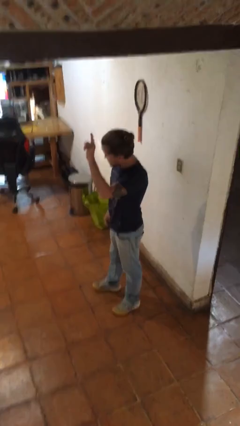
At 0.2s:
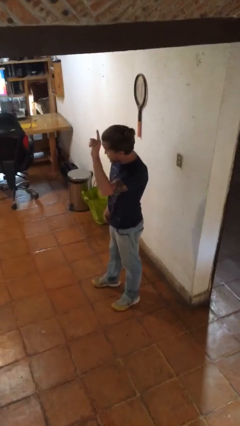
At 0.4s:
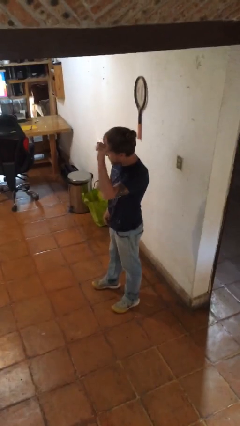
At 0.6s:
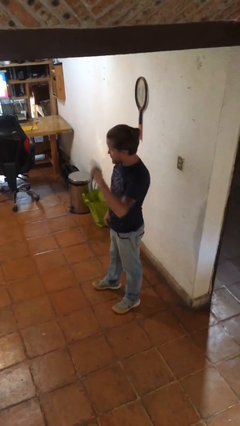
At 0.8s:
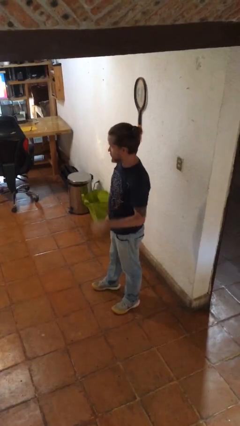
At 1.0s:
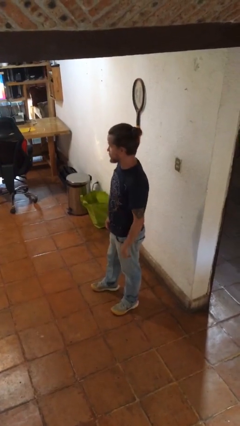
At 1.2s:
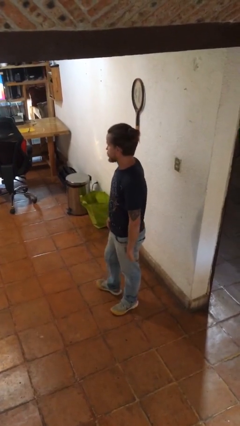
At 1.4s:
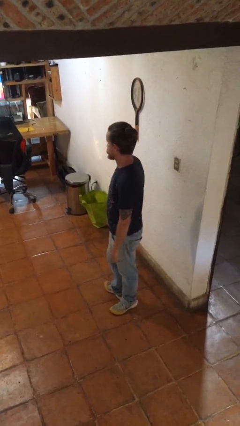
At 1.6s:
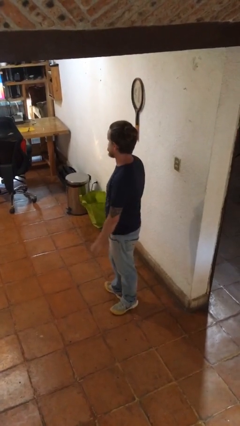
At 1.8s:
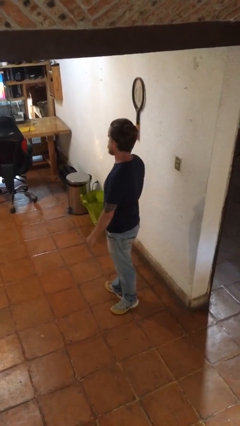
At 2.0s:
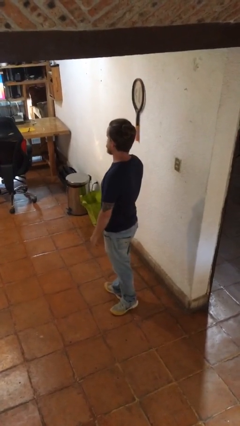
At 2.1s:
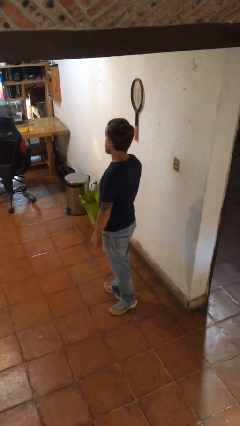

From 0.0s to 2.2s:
person gestures lower hand

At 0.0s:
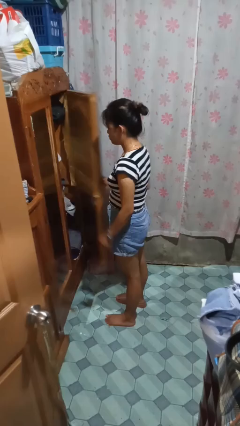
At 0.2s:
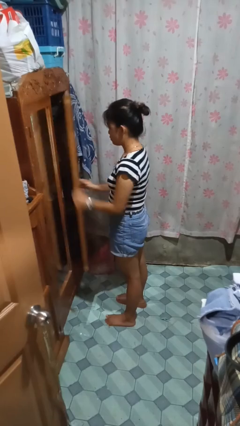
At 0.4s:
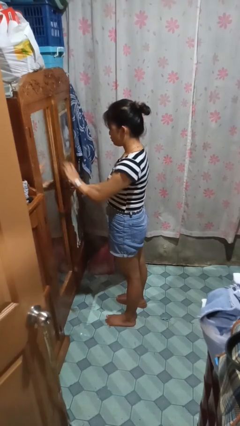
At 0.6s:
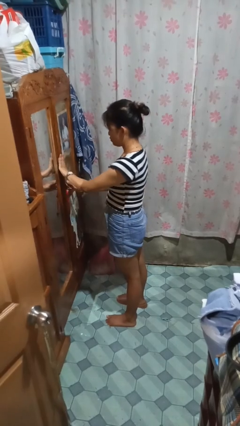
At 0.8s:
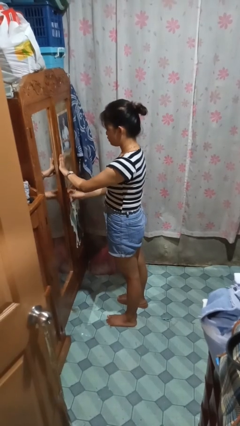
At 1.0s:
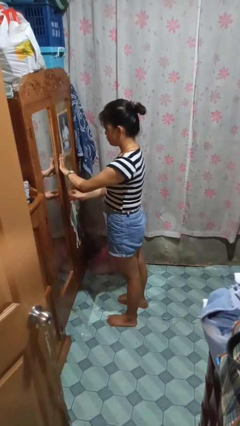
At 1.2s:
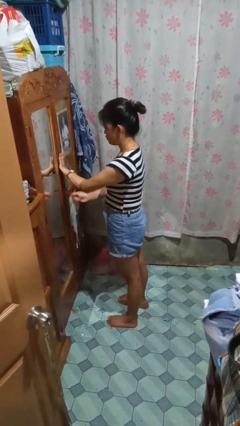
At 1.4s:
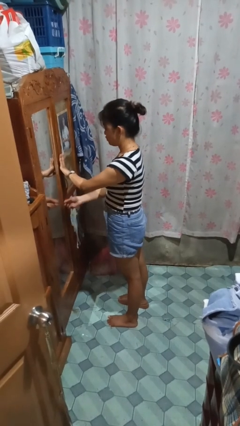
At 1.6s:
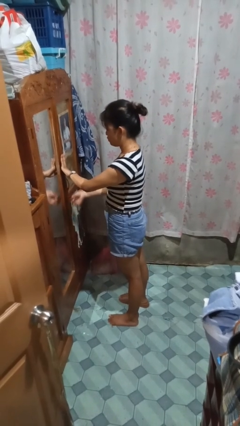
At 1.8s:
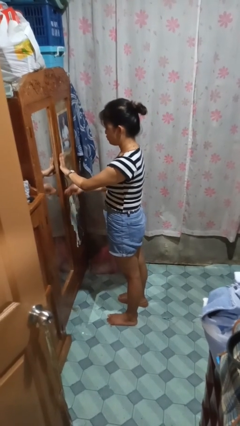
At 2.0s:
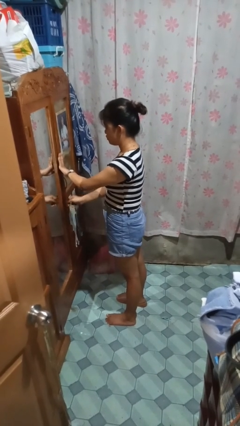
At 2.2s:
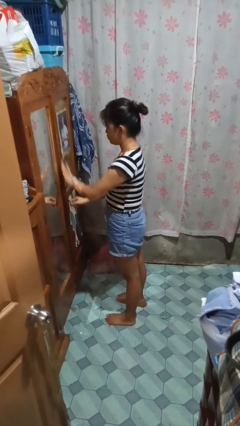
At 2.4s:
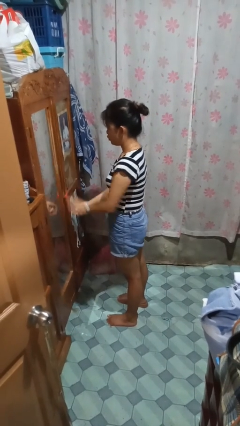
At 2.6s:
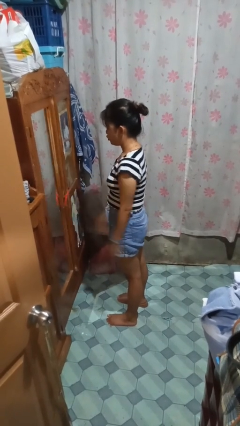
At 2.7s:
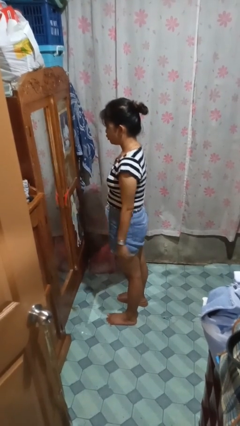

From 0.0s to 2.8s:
person closes closet door

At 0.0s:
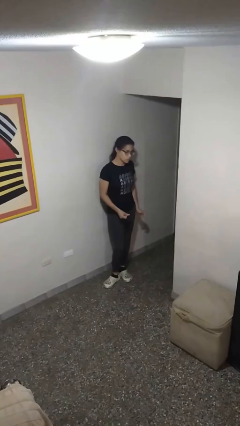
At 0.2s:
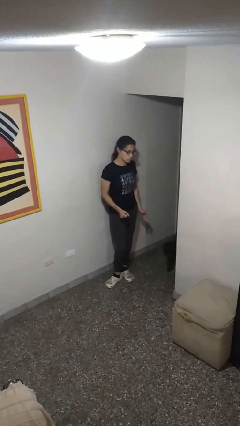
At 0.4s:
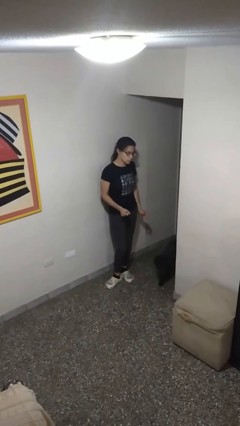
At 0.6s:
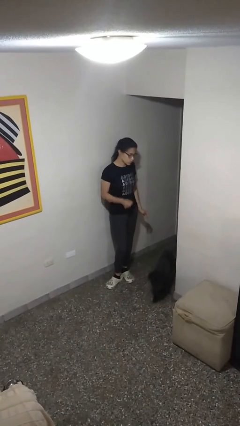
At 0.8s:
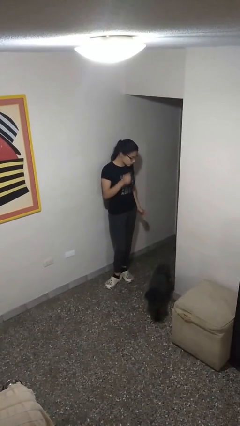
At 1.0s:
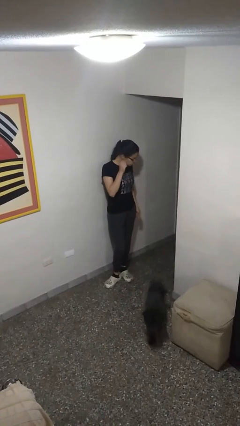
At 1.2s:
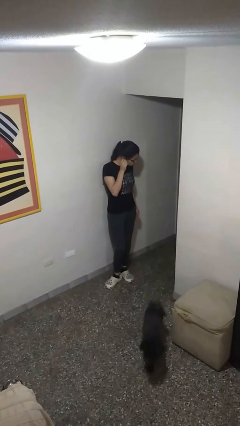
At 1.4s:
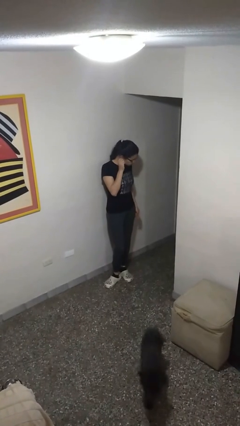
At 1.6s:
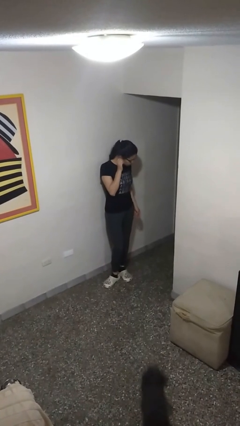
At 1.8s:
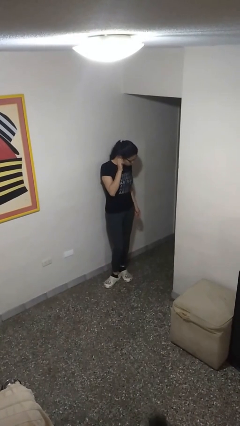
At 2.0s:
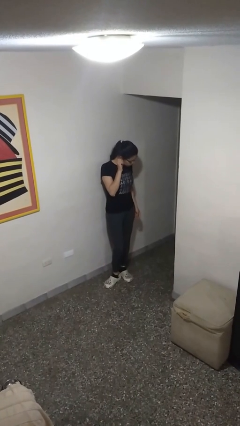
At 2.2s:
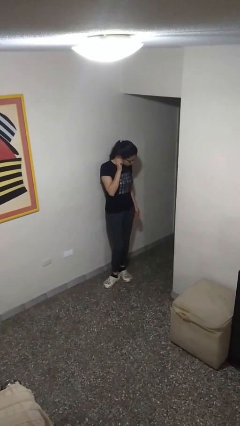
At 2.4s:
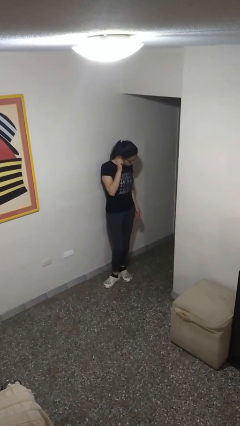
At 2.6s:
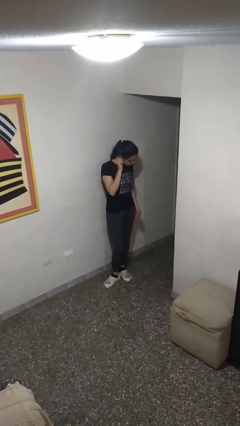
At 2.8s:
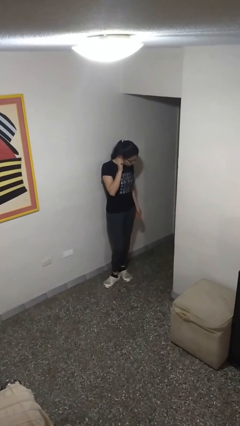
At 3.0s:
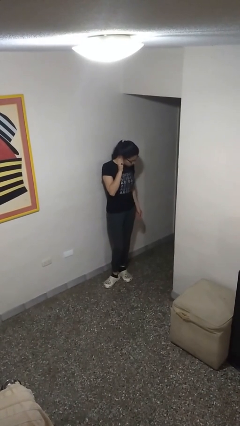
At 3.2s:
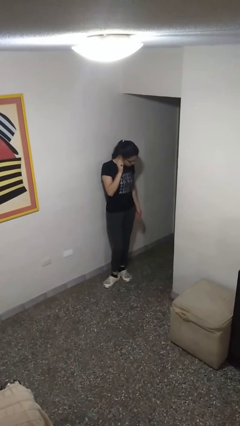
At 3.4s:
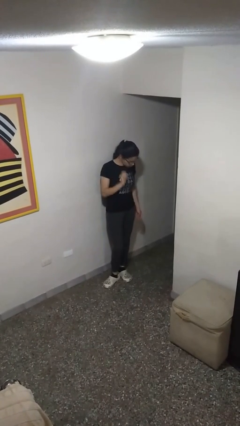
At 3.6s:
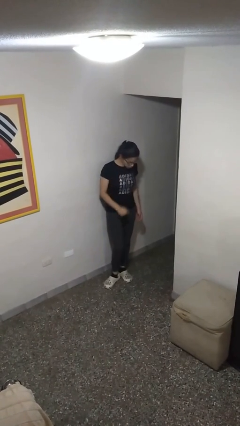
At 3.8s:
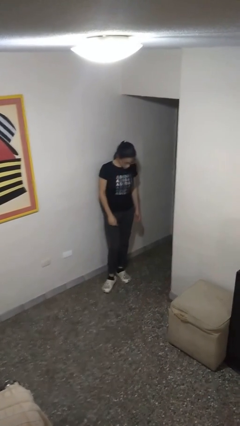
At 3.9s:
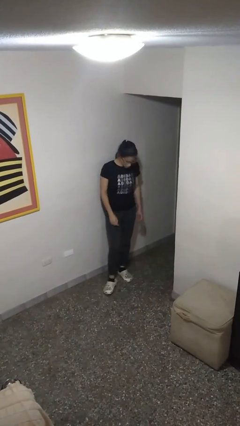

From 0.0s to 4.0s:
person touches earlobe

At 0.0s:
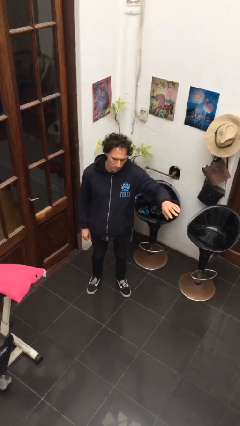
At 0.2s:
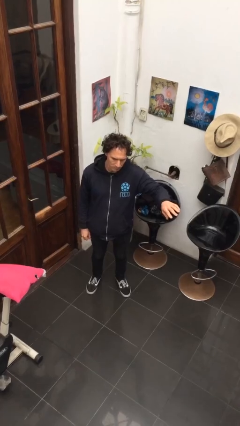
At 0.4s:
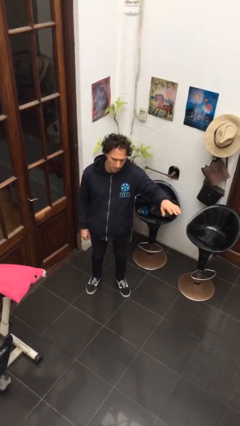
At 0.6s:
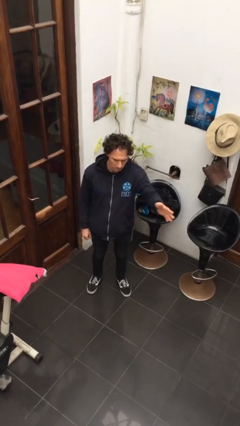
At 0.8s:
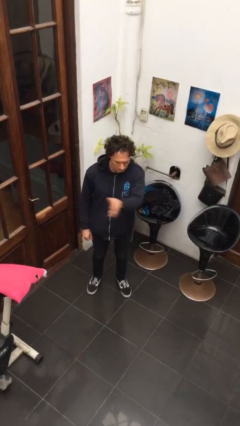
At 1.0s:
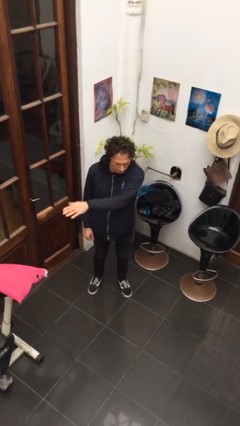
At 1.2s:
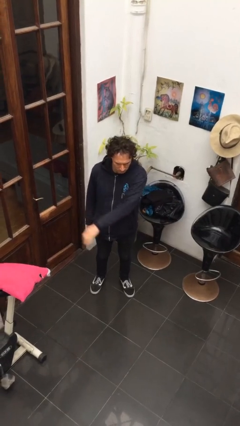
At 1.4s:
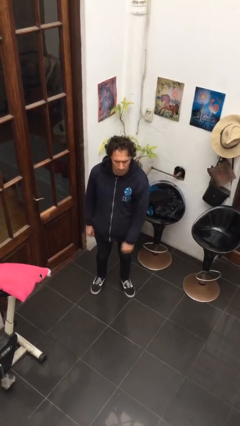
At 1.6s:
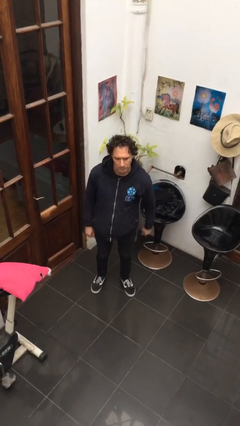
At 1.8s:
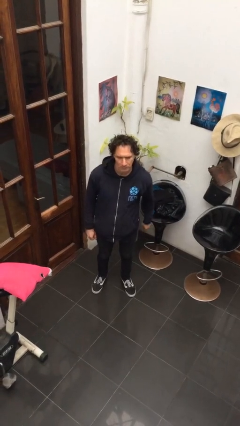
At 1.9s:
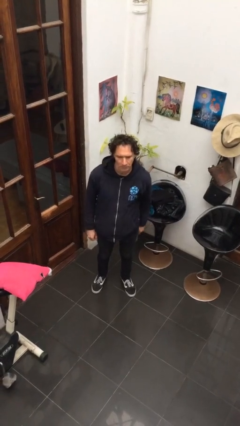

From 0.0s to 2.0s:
person gestures swipe right

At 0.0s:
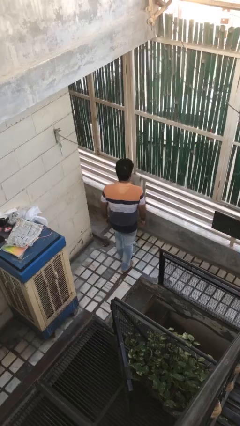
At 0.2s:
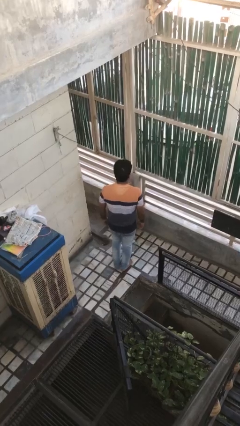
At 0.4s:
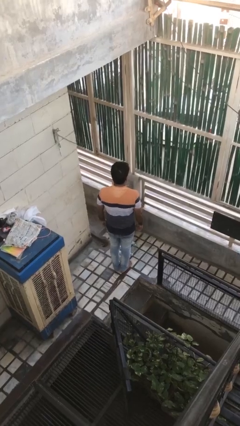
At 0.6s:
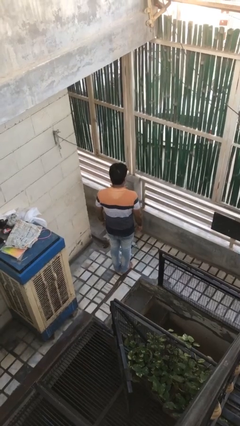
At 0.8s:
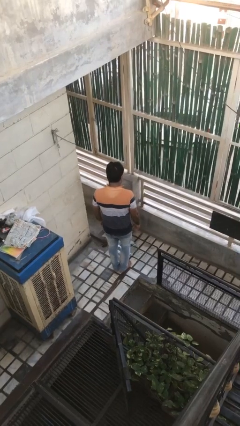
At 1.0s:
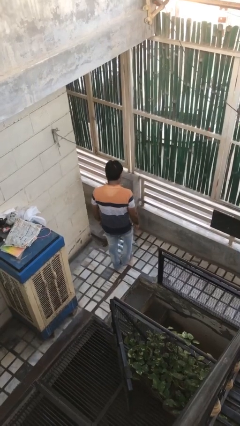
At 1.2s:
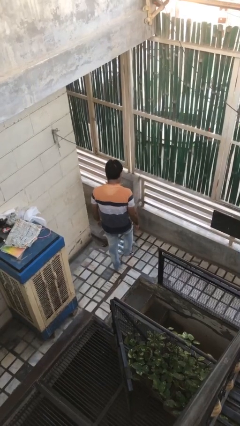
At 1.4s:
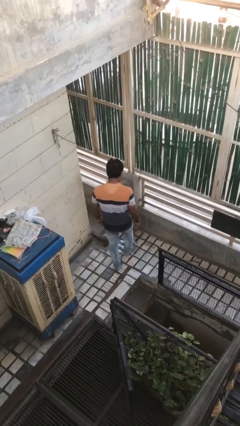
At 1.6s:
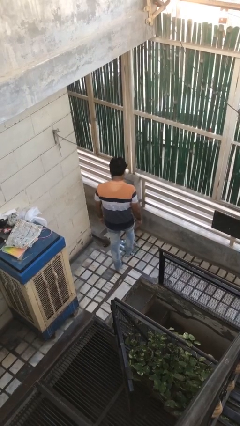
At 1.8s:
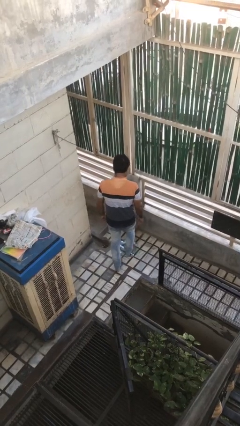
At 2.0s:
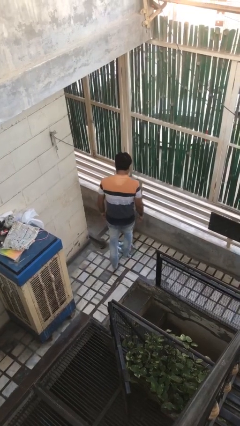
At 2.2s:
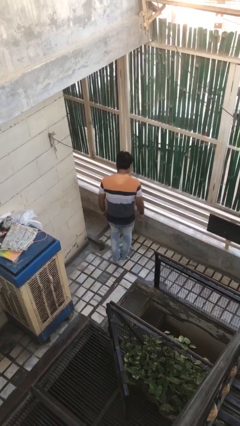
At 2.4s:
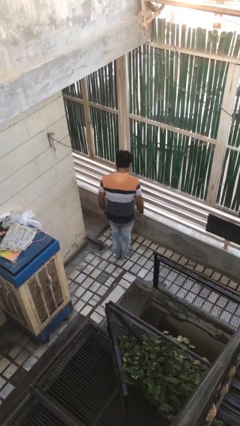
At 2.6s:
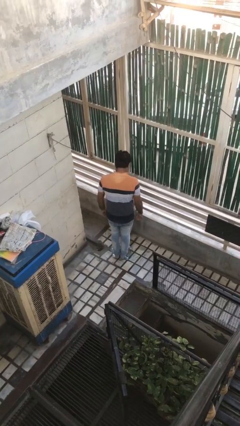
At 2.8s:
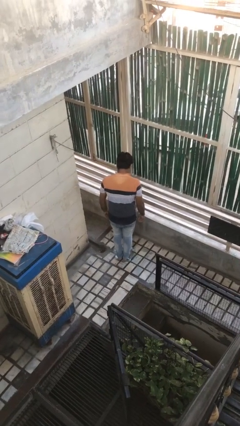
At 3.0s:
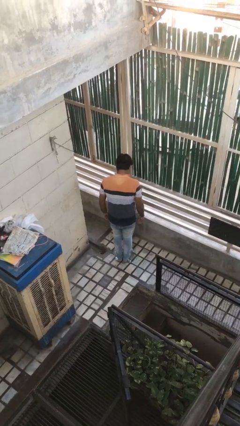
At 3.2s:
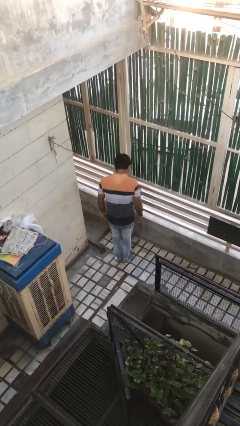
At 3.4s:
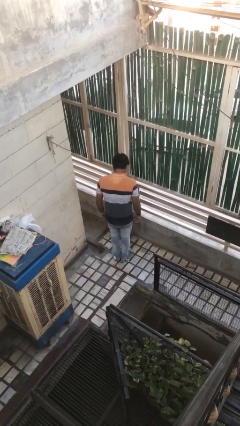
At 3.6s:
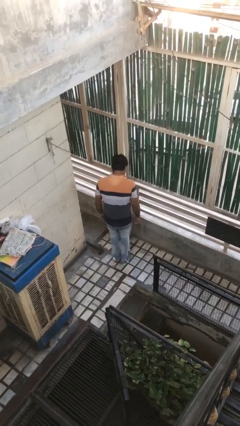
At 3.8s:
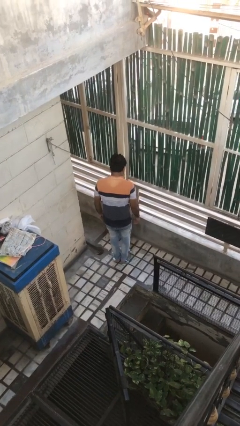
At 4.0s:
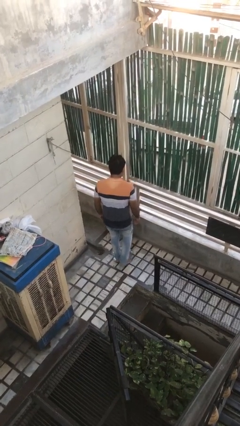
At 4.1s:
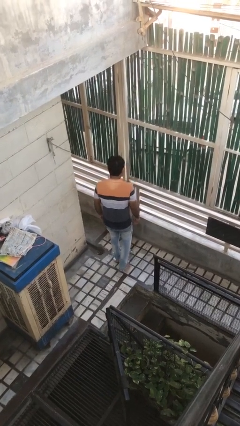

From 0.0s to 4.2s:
person uses bodyweight scale

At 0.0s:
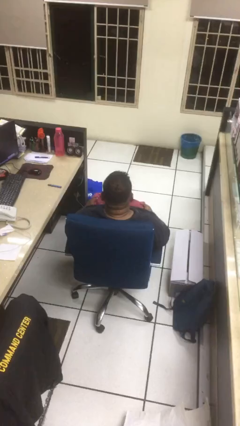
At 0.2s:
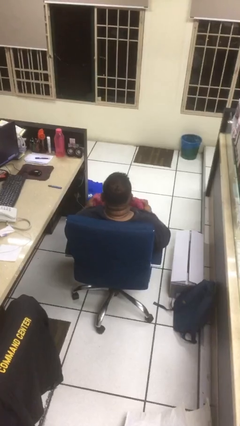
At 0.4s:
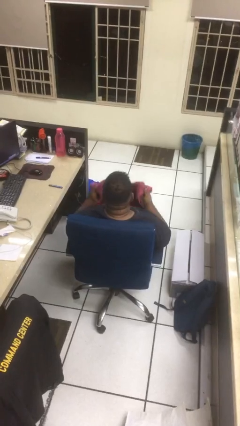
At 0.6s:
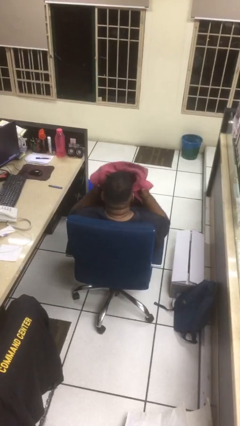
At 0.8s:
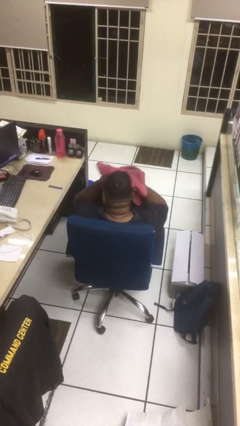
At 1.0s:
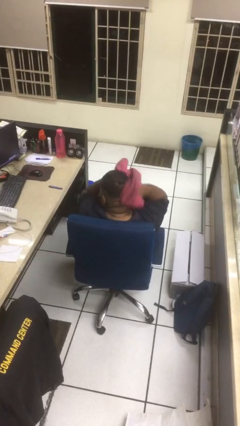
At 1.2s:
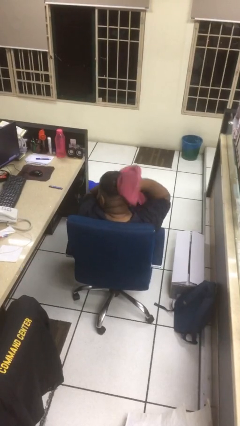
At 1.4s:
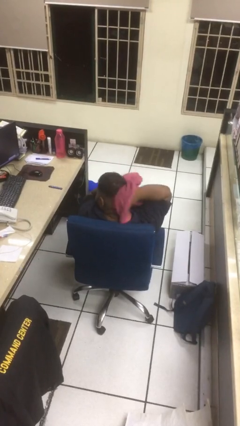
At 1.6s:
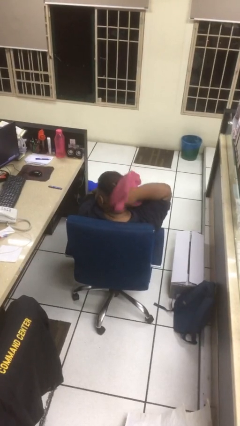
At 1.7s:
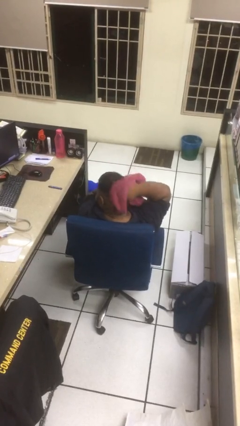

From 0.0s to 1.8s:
person dries hair with towel

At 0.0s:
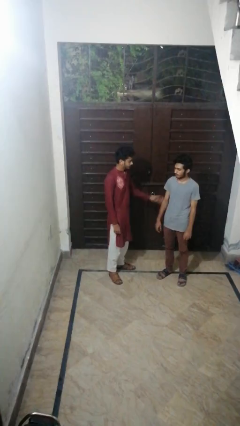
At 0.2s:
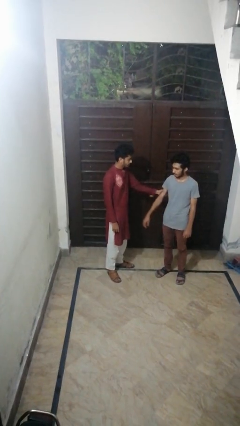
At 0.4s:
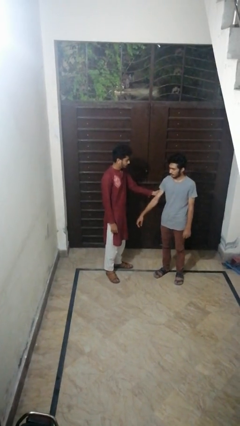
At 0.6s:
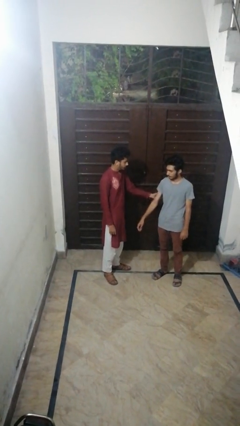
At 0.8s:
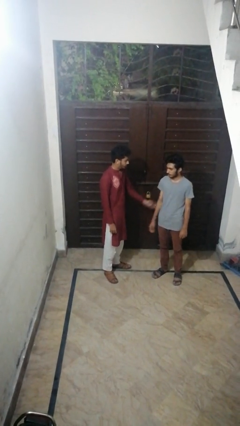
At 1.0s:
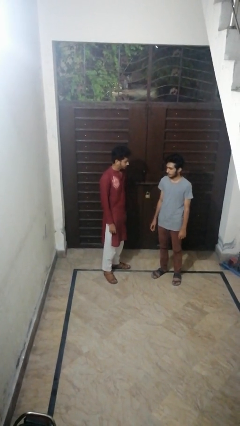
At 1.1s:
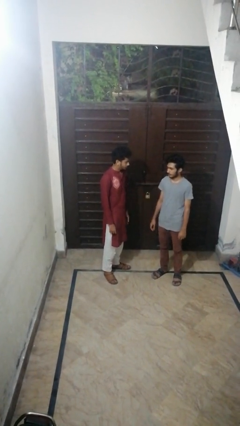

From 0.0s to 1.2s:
person grabs person by bicep
